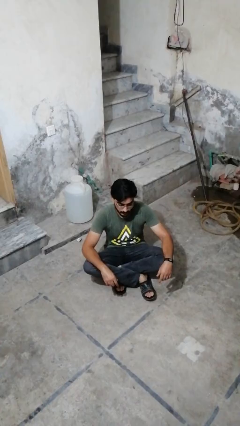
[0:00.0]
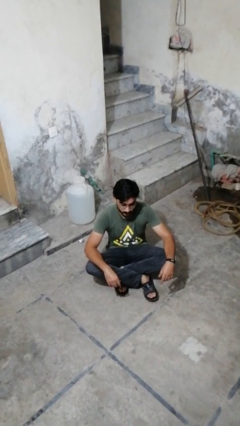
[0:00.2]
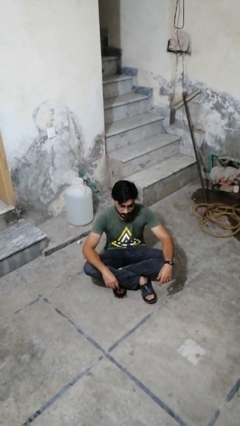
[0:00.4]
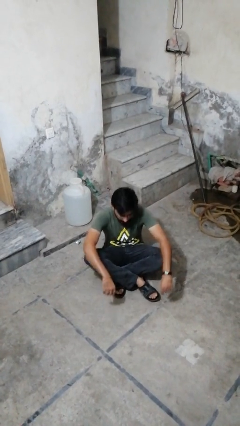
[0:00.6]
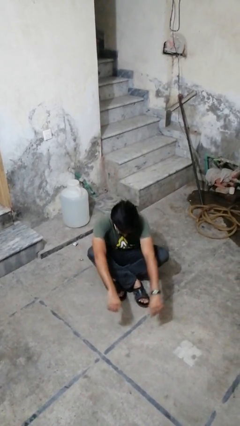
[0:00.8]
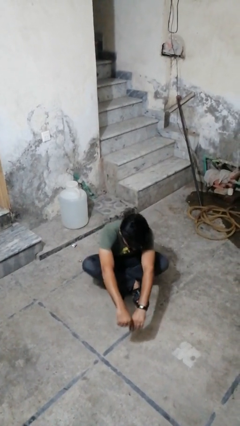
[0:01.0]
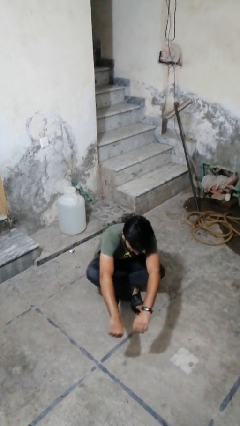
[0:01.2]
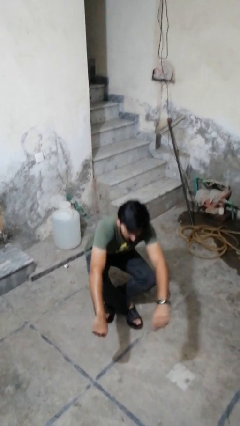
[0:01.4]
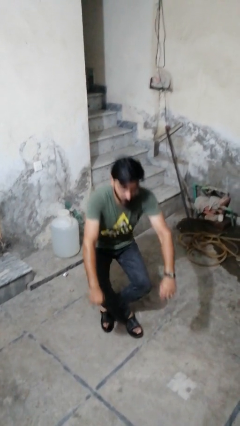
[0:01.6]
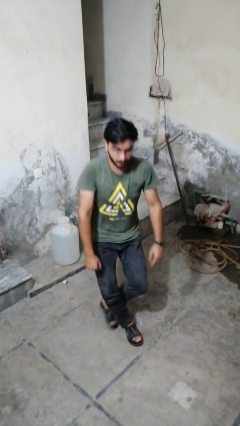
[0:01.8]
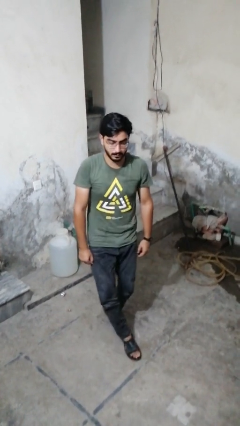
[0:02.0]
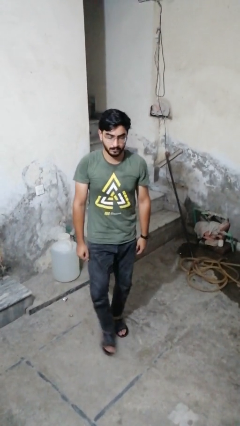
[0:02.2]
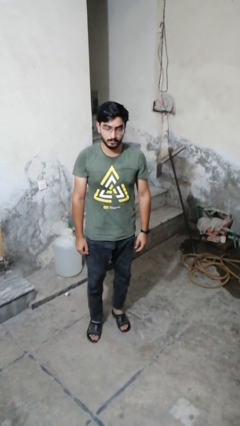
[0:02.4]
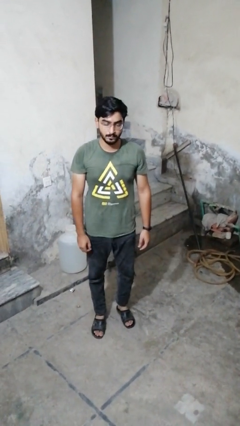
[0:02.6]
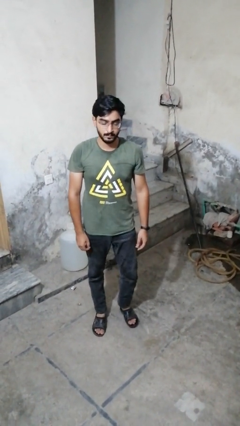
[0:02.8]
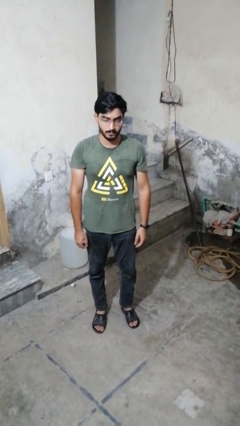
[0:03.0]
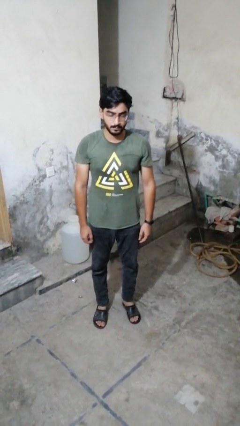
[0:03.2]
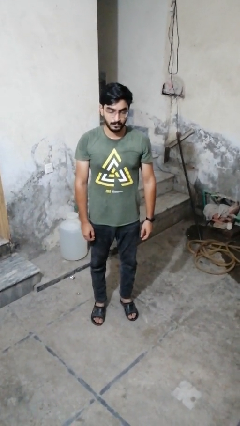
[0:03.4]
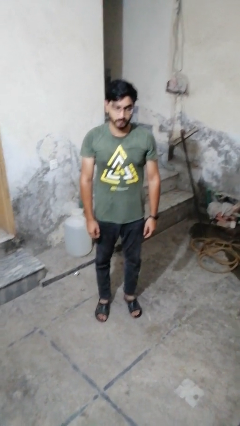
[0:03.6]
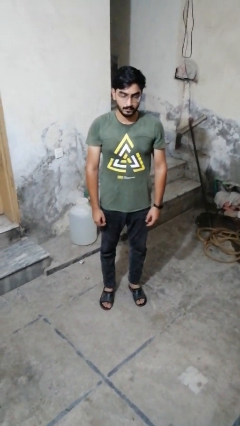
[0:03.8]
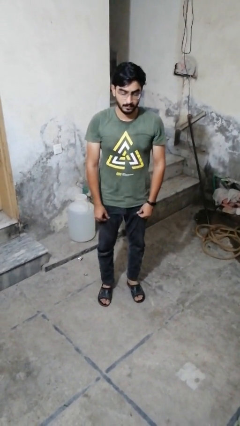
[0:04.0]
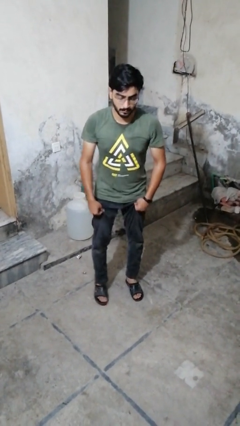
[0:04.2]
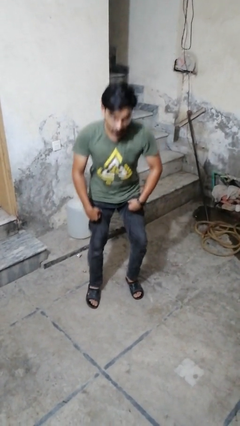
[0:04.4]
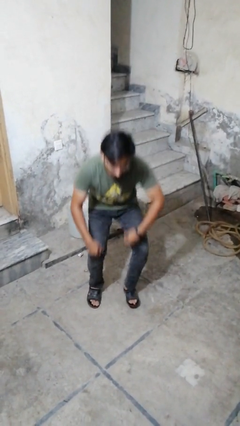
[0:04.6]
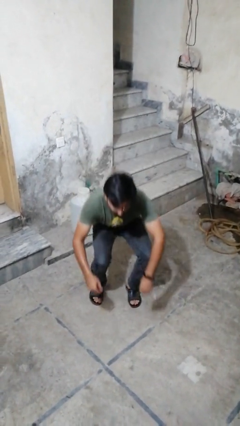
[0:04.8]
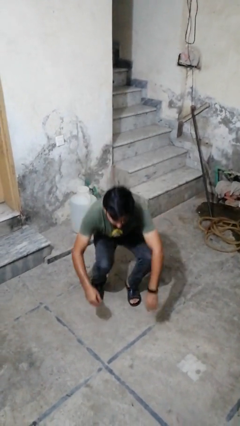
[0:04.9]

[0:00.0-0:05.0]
person stands up from floor

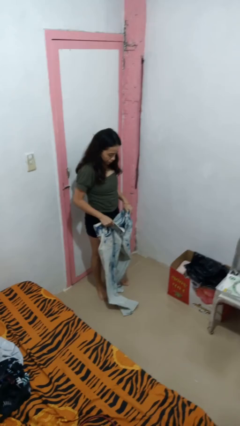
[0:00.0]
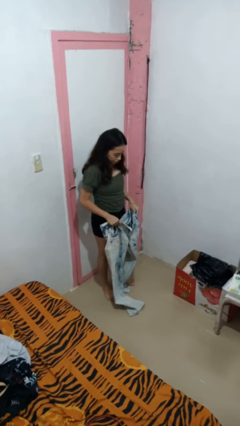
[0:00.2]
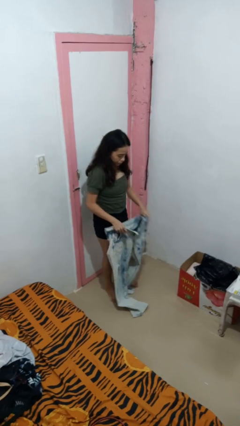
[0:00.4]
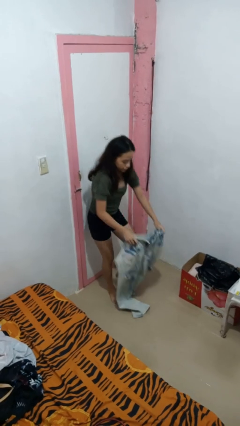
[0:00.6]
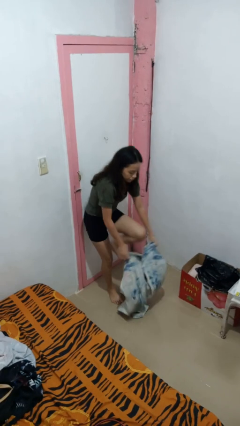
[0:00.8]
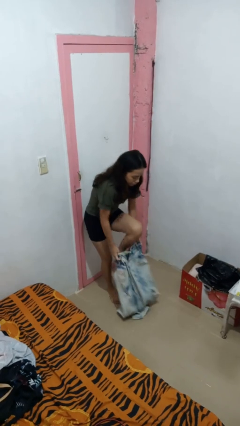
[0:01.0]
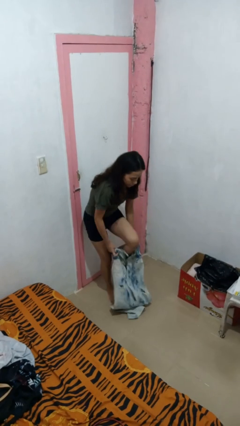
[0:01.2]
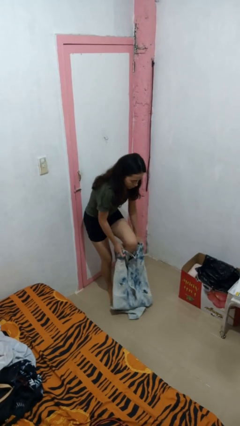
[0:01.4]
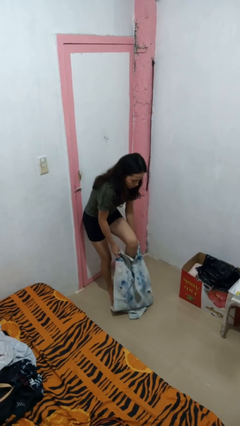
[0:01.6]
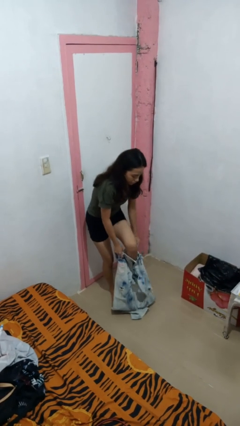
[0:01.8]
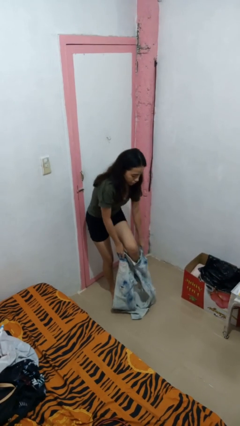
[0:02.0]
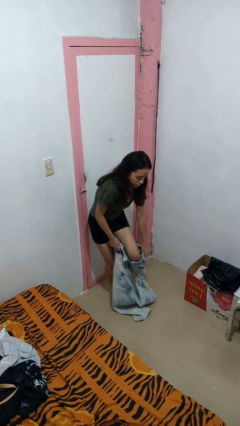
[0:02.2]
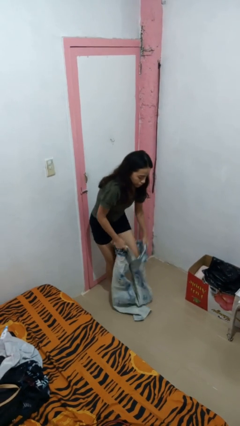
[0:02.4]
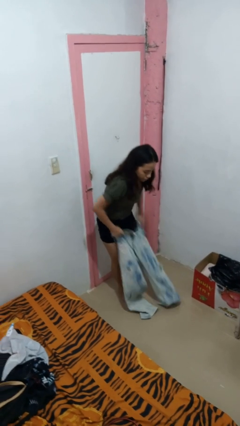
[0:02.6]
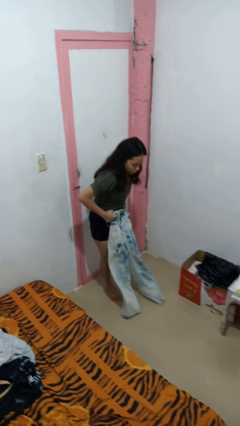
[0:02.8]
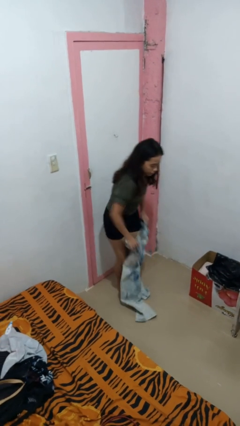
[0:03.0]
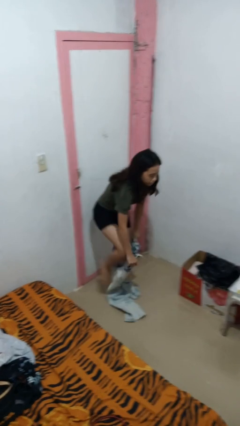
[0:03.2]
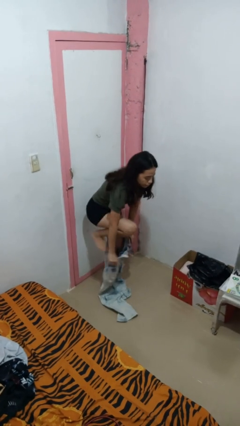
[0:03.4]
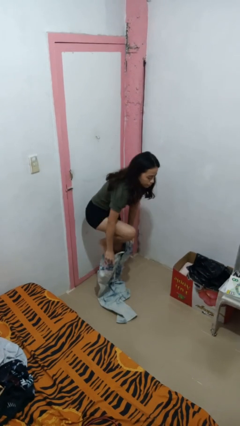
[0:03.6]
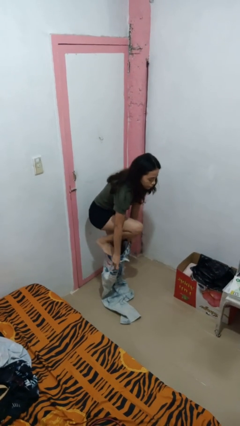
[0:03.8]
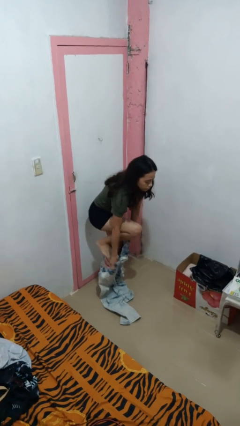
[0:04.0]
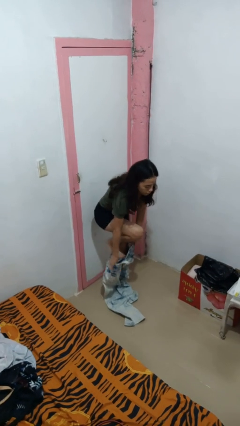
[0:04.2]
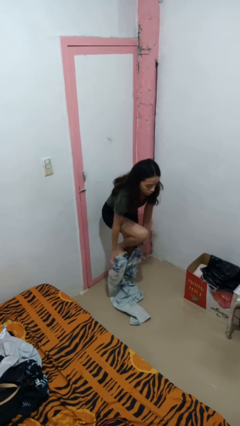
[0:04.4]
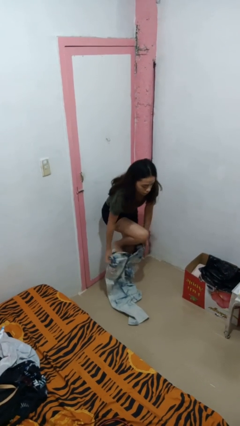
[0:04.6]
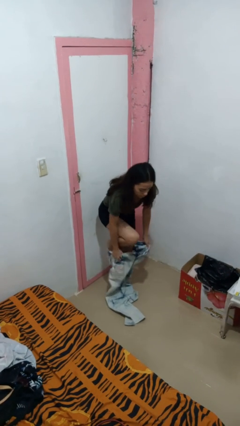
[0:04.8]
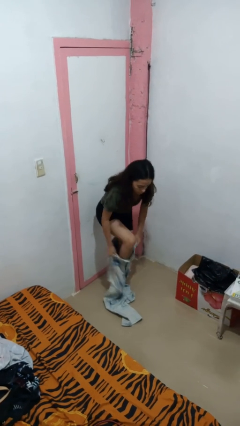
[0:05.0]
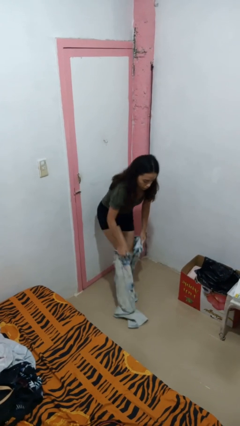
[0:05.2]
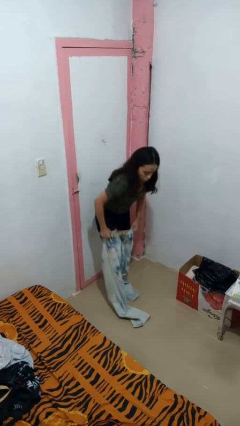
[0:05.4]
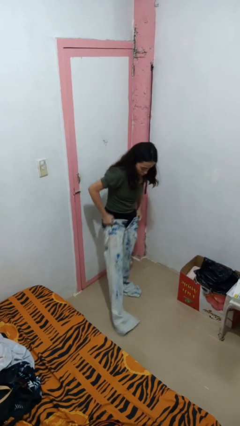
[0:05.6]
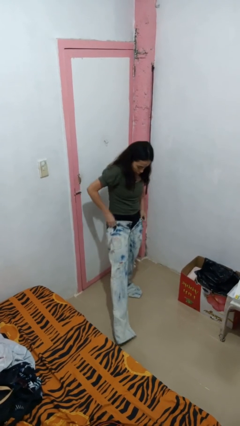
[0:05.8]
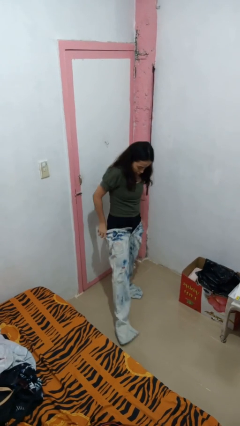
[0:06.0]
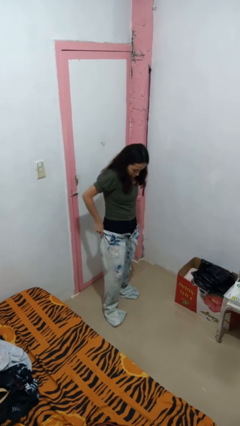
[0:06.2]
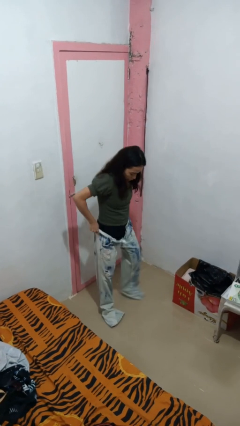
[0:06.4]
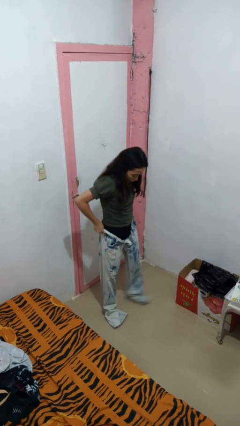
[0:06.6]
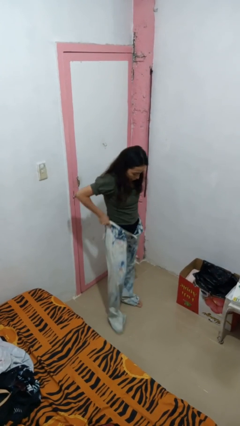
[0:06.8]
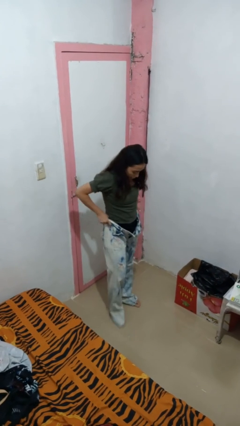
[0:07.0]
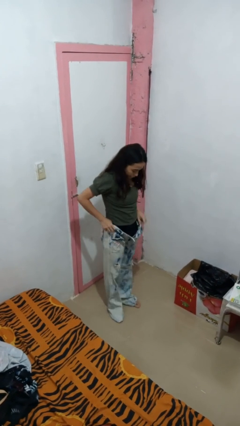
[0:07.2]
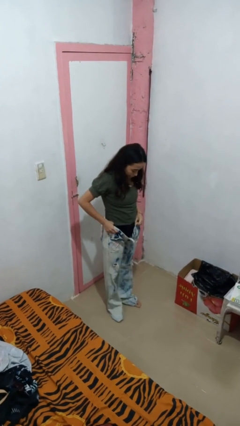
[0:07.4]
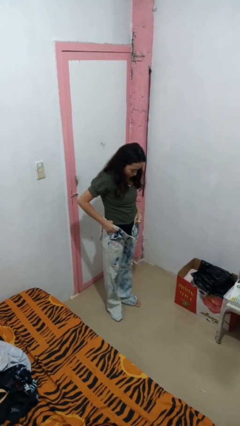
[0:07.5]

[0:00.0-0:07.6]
person puts on pants

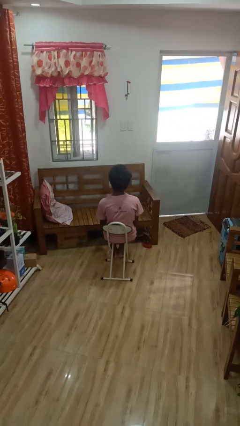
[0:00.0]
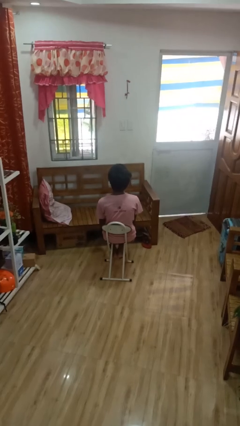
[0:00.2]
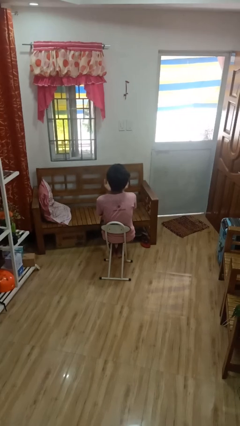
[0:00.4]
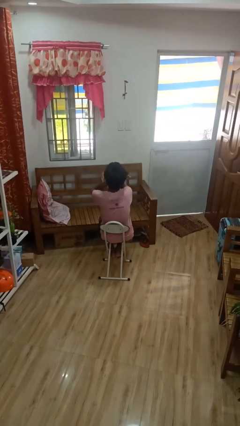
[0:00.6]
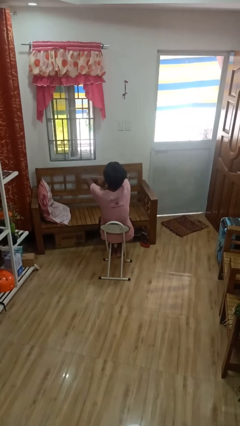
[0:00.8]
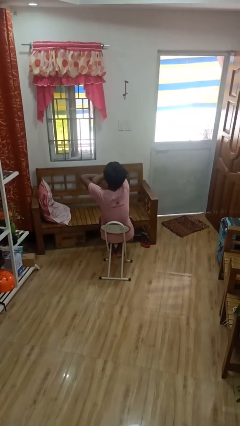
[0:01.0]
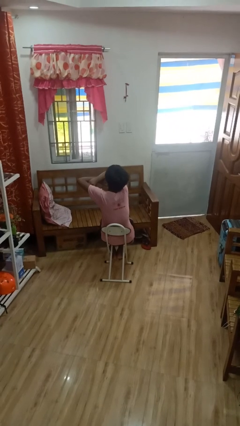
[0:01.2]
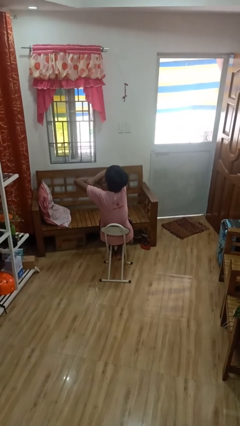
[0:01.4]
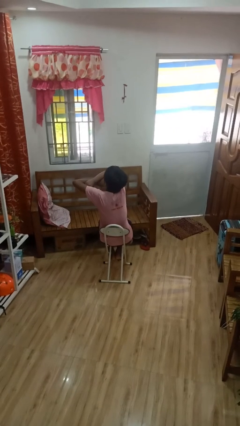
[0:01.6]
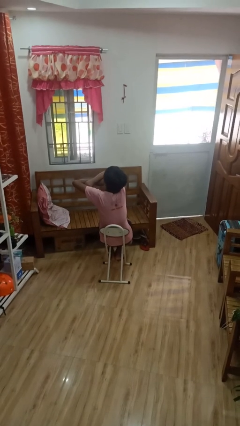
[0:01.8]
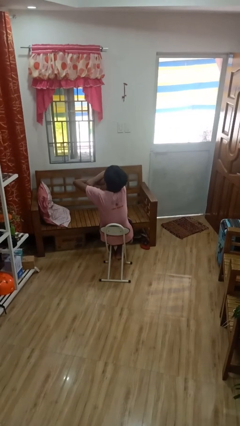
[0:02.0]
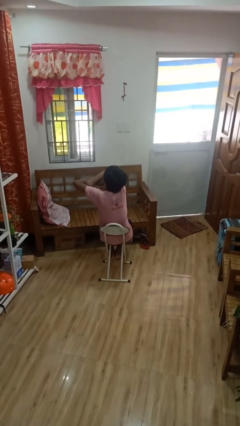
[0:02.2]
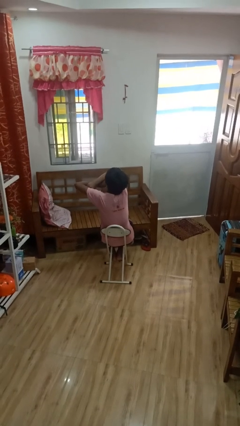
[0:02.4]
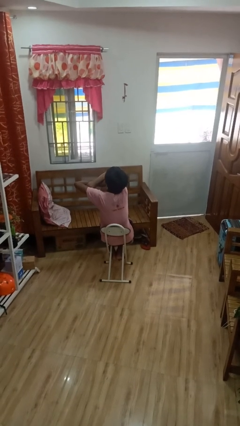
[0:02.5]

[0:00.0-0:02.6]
person gestures arms x

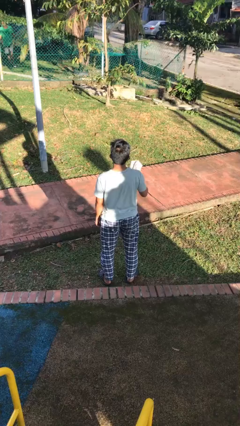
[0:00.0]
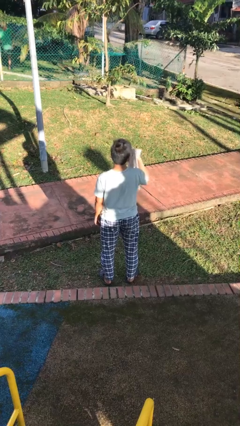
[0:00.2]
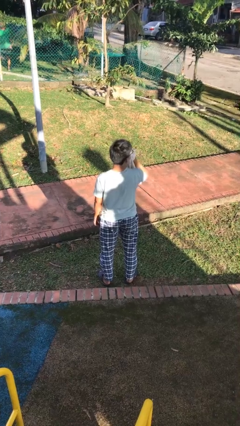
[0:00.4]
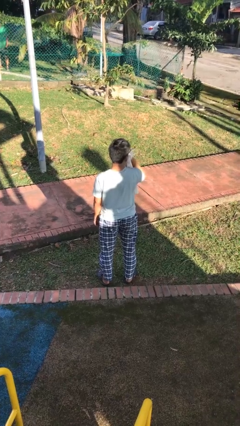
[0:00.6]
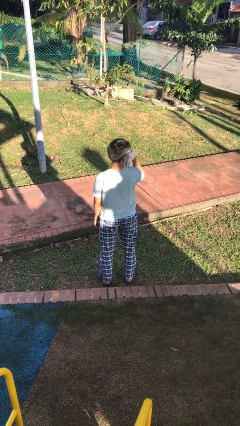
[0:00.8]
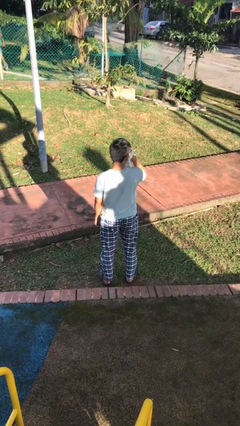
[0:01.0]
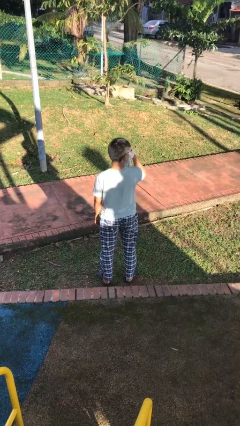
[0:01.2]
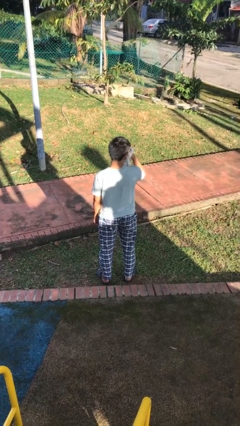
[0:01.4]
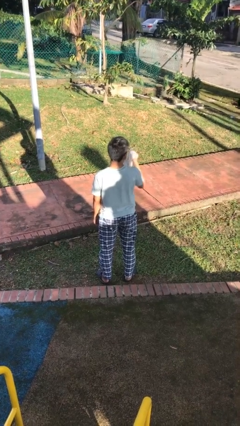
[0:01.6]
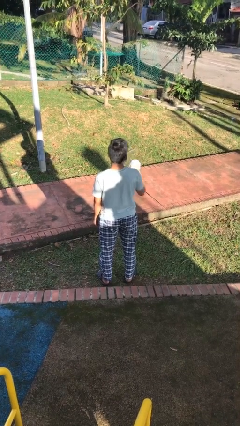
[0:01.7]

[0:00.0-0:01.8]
person blows nose

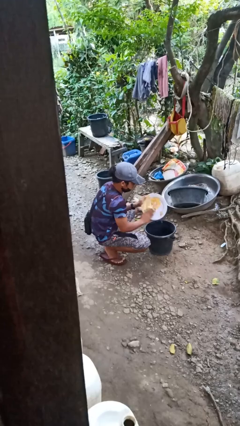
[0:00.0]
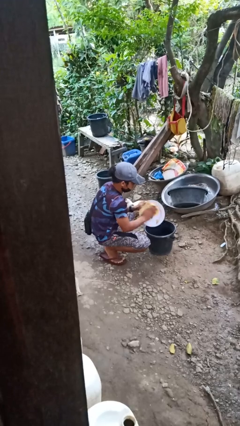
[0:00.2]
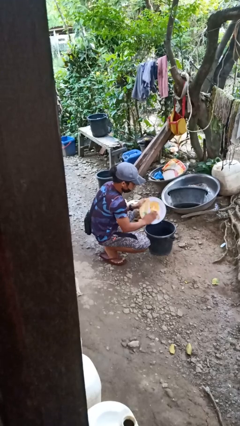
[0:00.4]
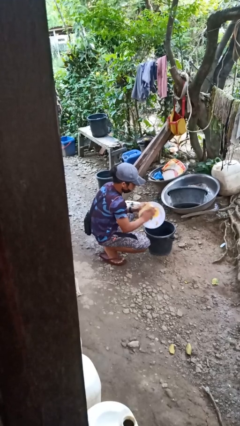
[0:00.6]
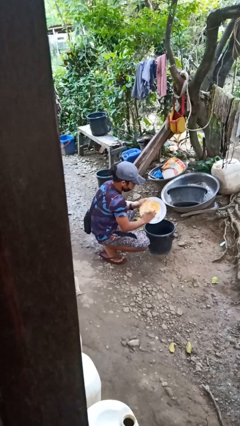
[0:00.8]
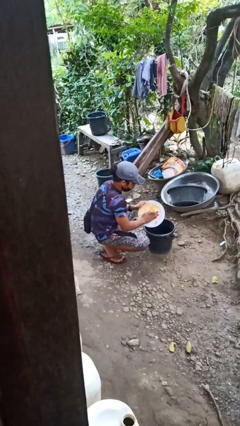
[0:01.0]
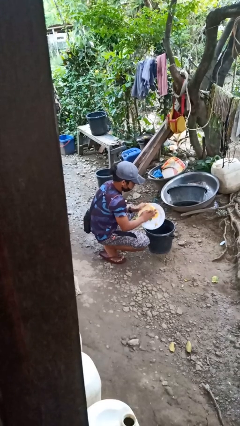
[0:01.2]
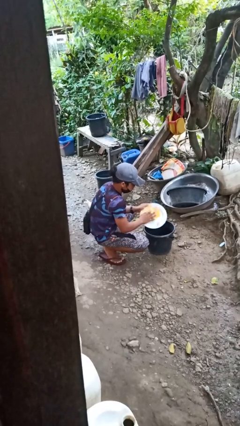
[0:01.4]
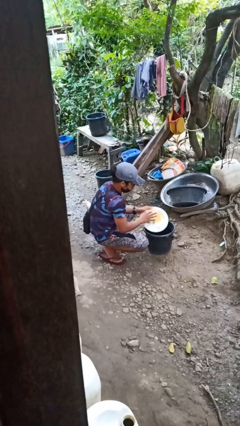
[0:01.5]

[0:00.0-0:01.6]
person washes dish
